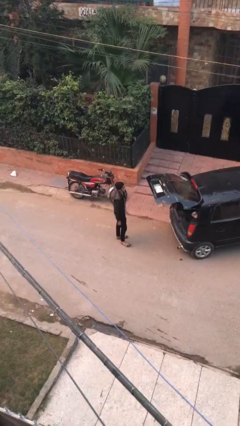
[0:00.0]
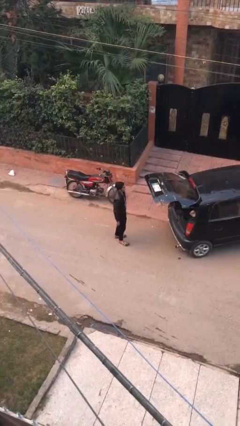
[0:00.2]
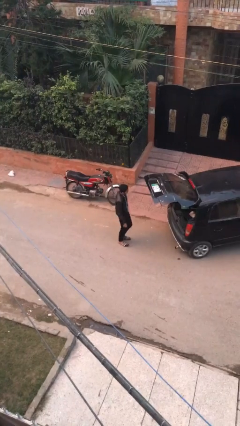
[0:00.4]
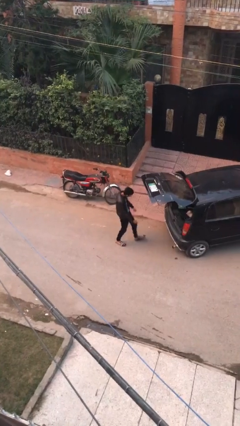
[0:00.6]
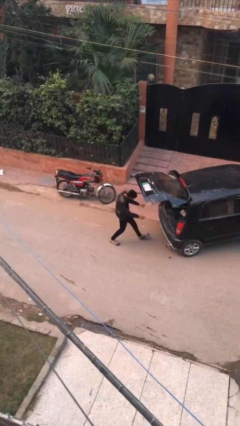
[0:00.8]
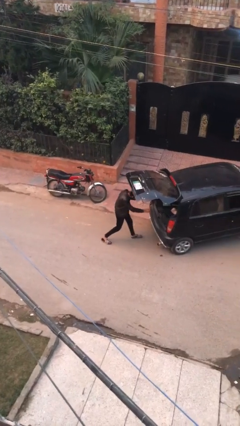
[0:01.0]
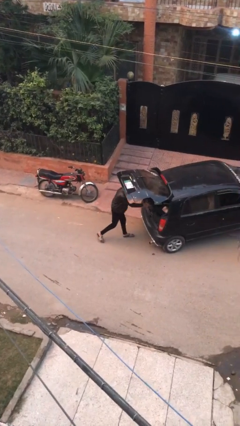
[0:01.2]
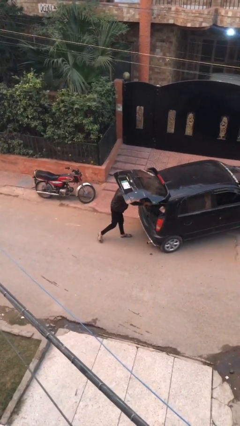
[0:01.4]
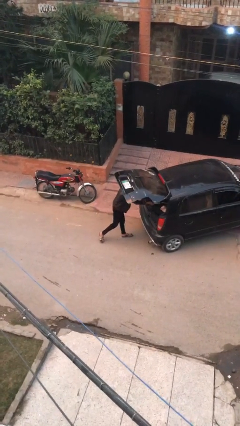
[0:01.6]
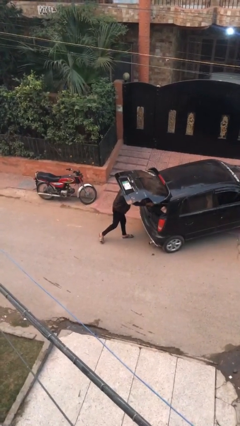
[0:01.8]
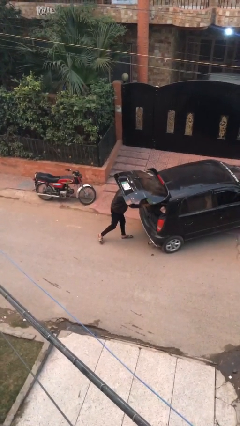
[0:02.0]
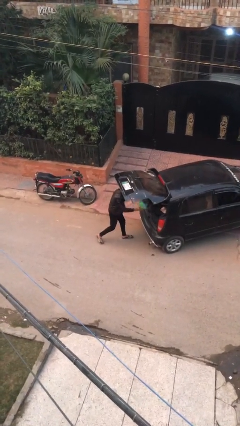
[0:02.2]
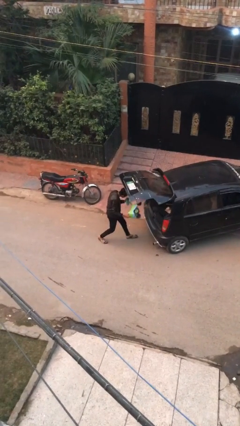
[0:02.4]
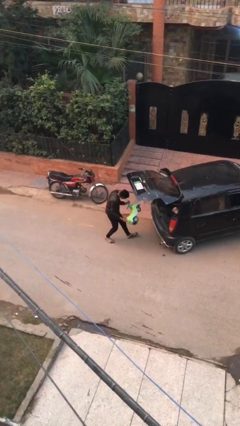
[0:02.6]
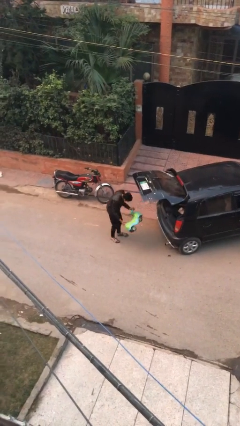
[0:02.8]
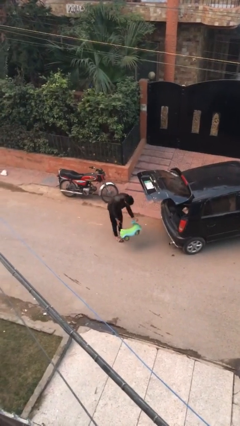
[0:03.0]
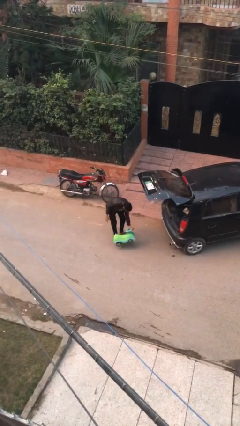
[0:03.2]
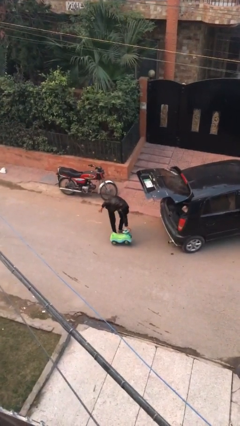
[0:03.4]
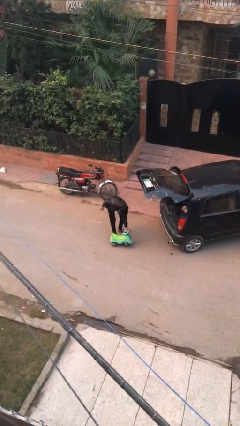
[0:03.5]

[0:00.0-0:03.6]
person unloads car

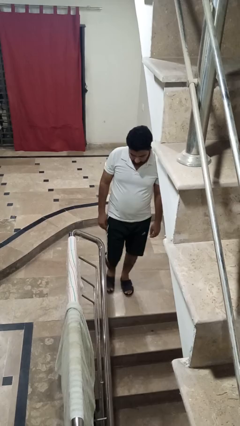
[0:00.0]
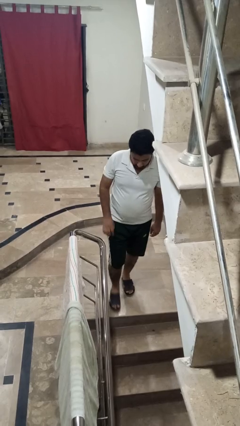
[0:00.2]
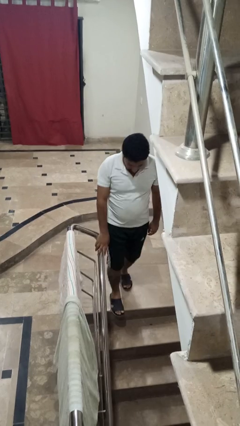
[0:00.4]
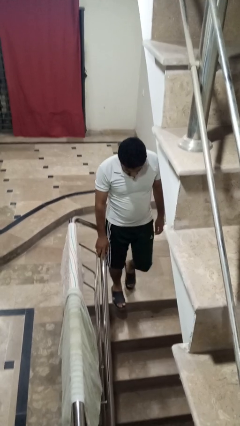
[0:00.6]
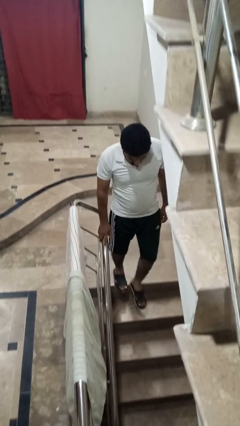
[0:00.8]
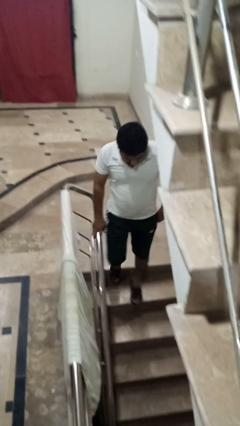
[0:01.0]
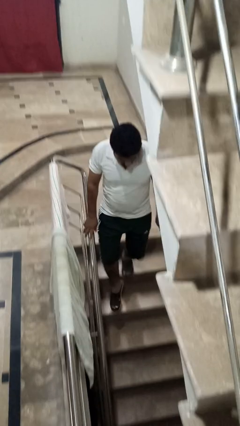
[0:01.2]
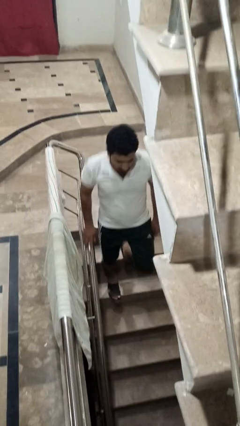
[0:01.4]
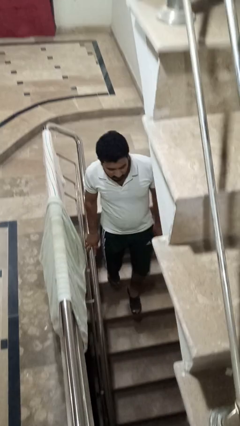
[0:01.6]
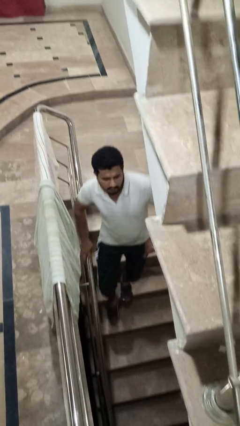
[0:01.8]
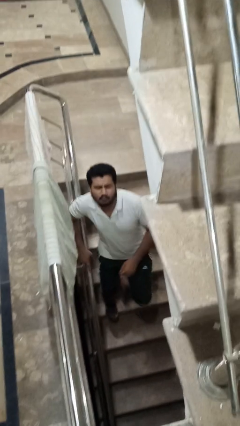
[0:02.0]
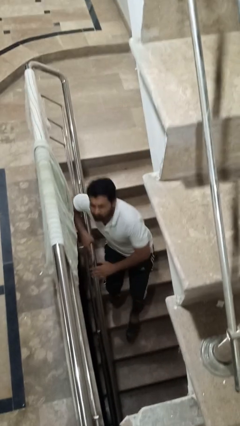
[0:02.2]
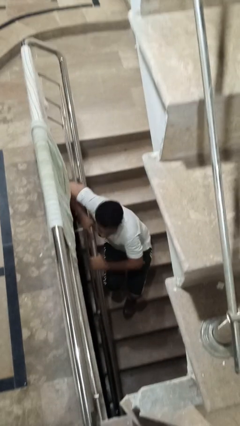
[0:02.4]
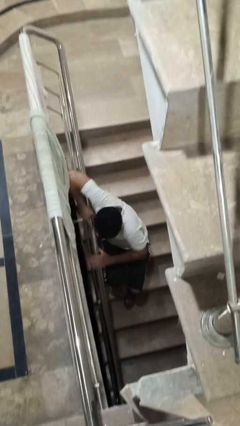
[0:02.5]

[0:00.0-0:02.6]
person climbs down stairs

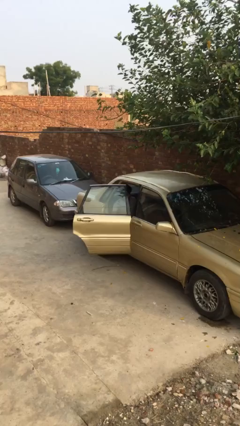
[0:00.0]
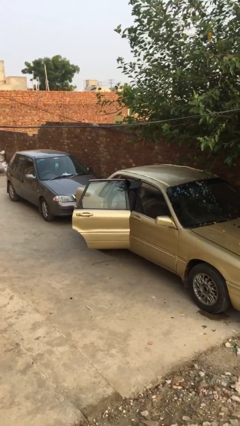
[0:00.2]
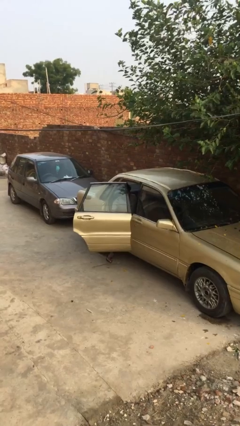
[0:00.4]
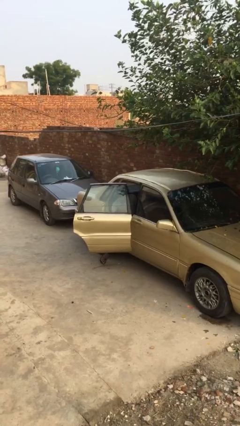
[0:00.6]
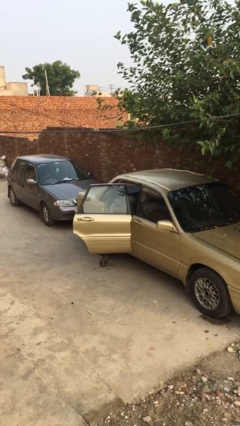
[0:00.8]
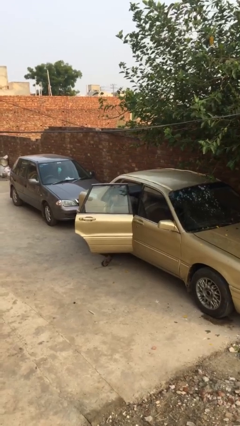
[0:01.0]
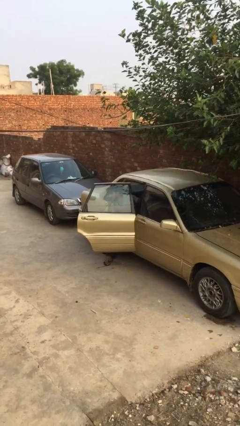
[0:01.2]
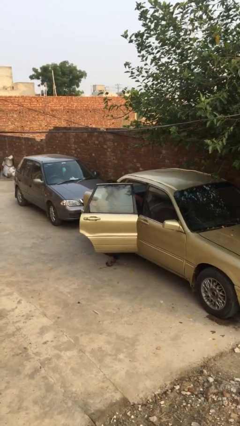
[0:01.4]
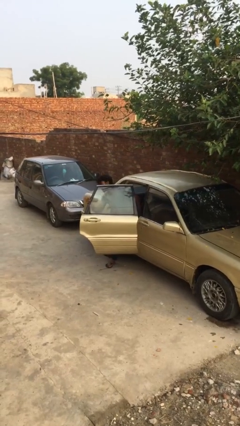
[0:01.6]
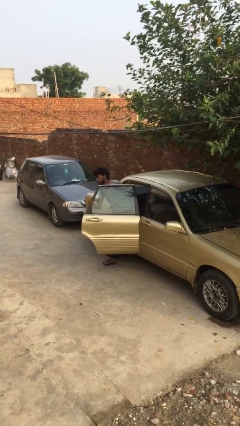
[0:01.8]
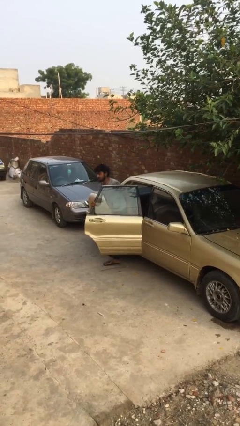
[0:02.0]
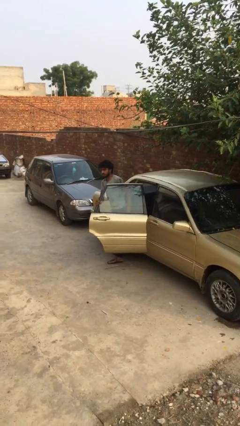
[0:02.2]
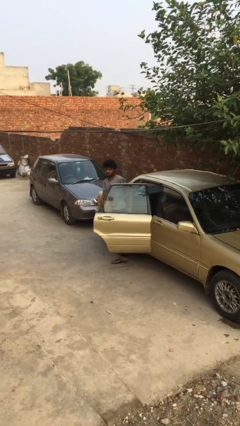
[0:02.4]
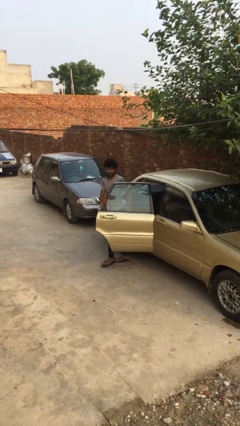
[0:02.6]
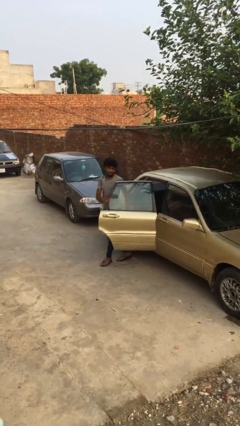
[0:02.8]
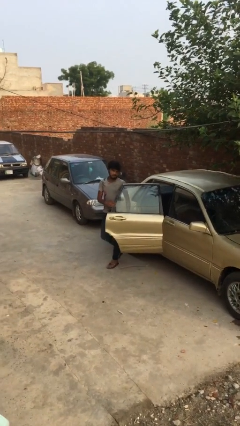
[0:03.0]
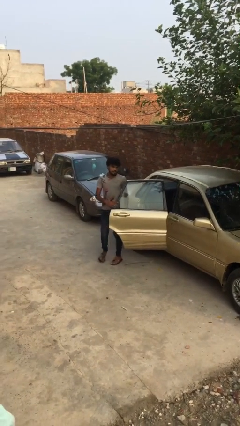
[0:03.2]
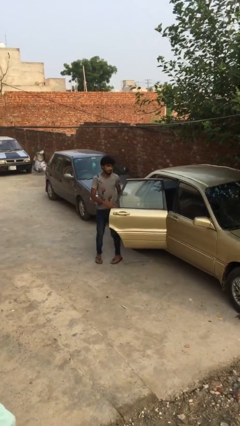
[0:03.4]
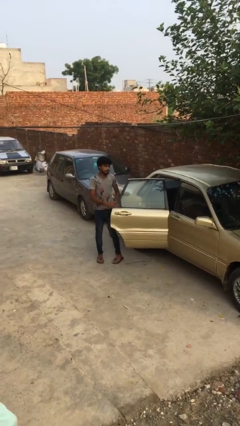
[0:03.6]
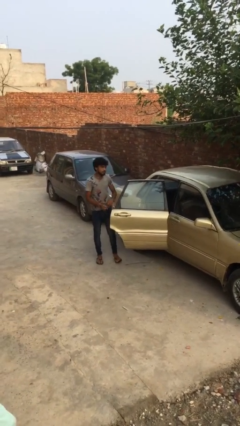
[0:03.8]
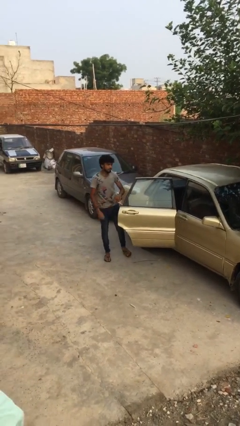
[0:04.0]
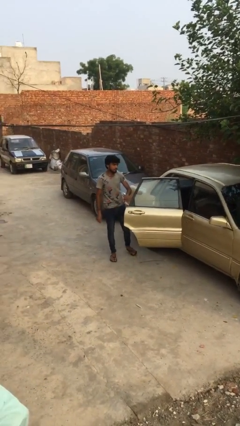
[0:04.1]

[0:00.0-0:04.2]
person exits car

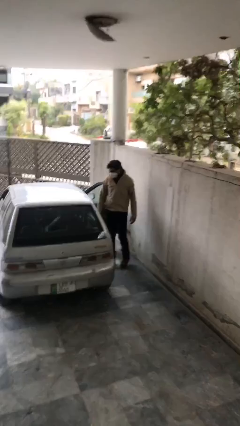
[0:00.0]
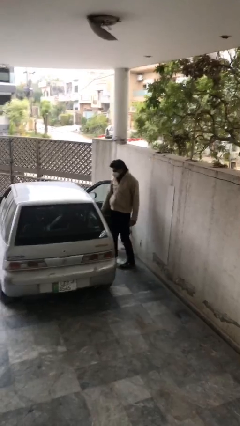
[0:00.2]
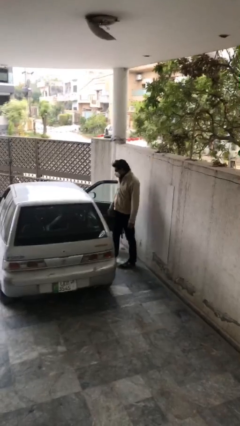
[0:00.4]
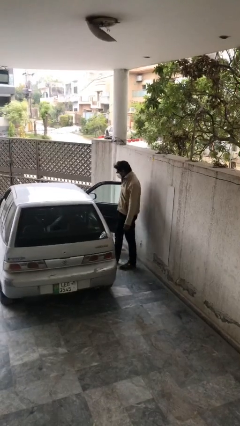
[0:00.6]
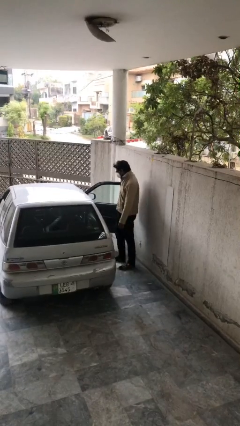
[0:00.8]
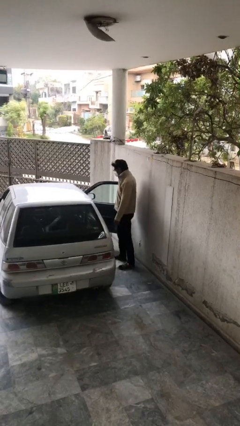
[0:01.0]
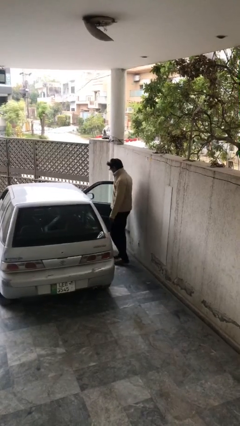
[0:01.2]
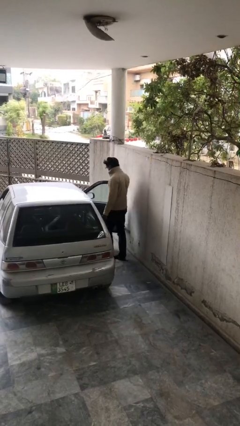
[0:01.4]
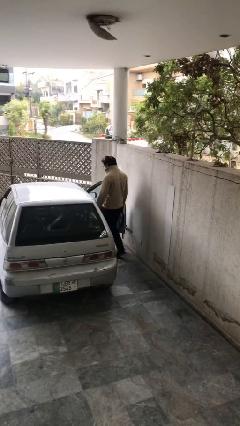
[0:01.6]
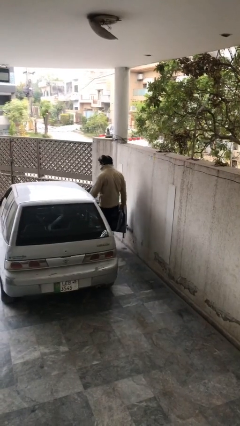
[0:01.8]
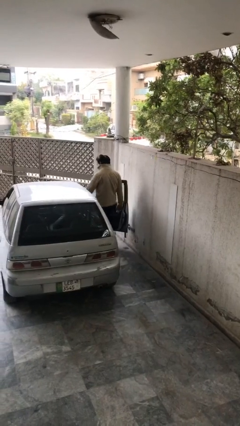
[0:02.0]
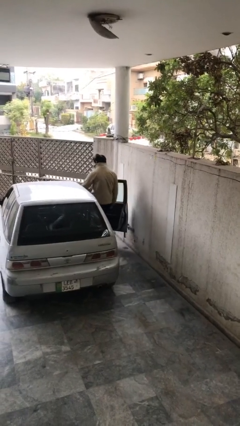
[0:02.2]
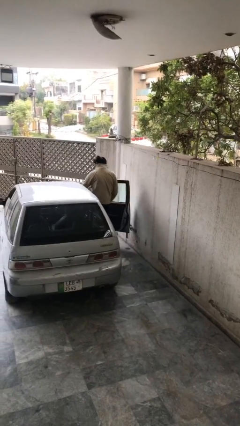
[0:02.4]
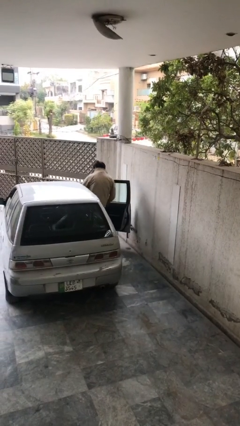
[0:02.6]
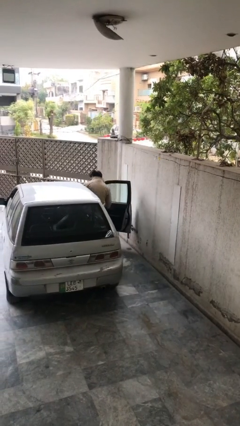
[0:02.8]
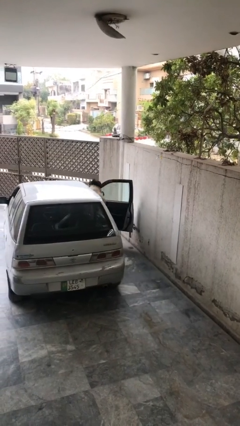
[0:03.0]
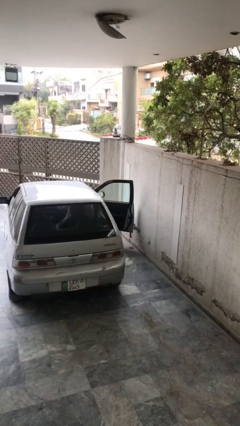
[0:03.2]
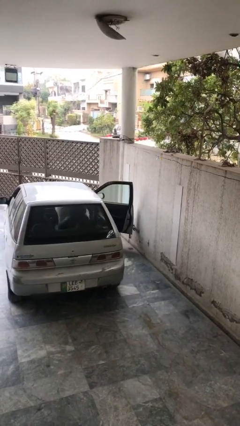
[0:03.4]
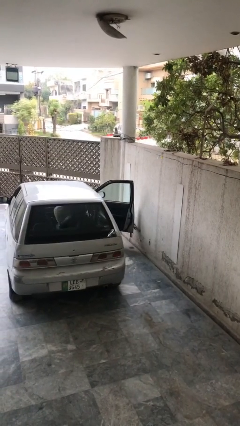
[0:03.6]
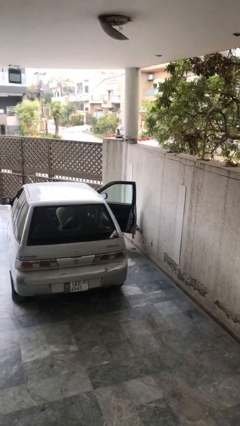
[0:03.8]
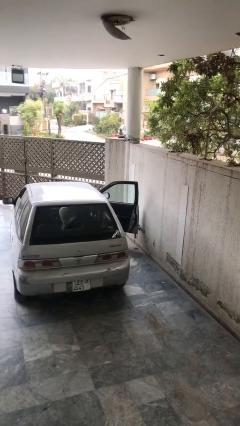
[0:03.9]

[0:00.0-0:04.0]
person enters car

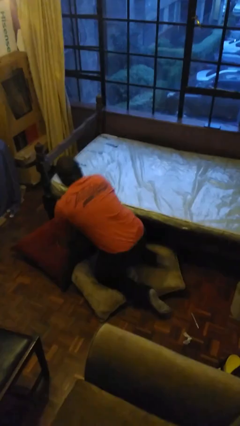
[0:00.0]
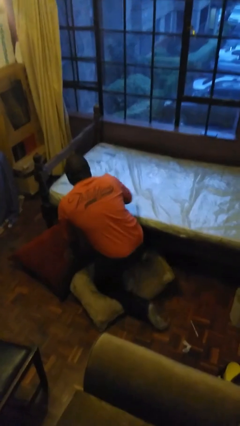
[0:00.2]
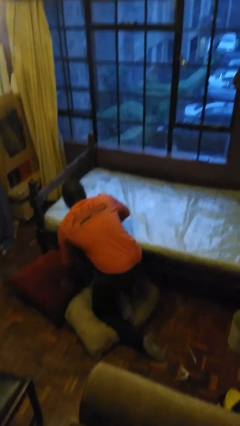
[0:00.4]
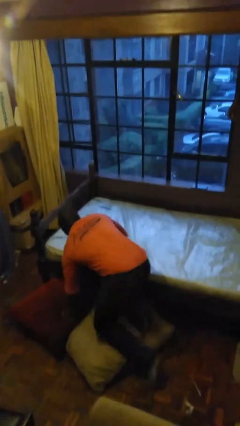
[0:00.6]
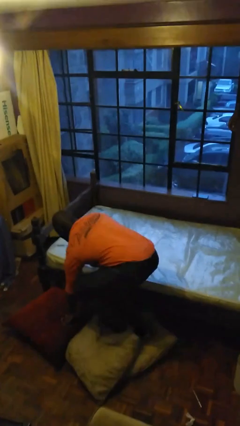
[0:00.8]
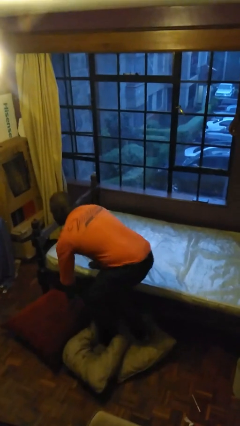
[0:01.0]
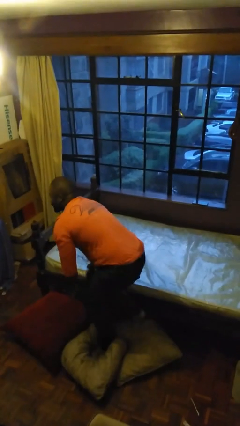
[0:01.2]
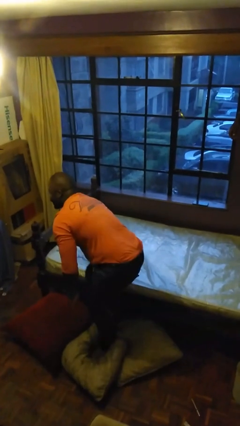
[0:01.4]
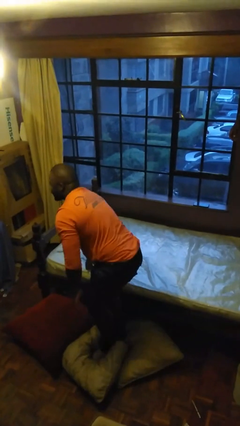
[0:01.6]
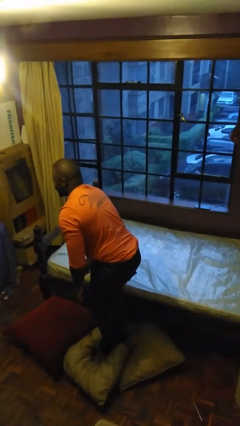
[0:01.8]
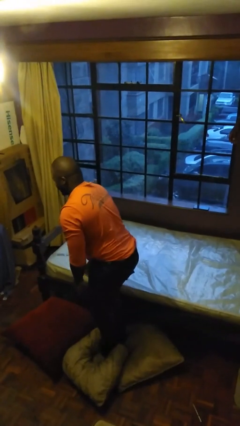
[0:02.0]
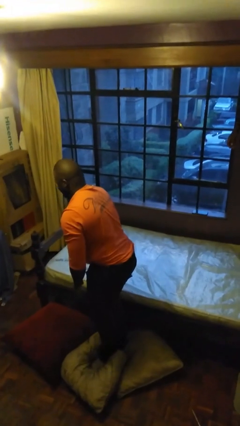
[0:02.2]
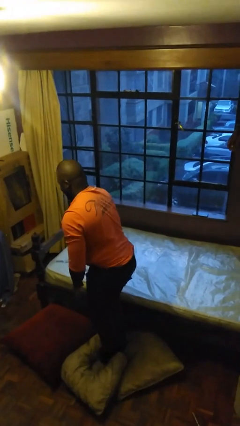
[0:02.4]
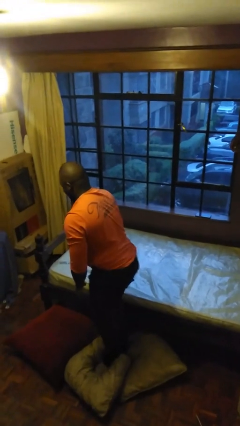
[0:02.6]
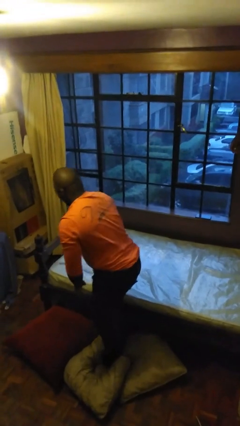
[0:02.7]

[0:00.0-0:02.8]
person stands up from floor

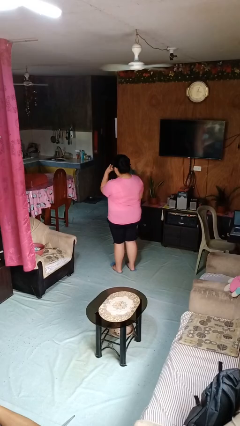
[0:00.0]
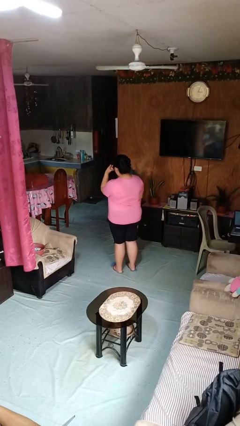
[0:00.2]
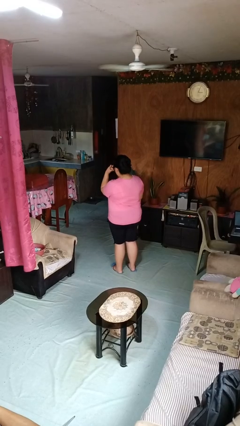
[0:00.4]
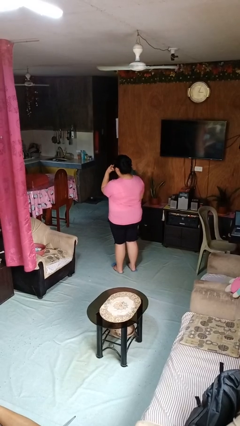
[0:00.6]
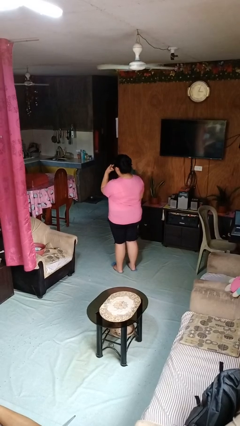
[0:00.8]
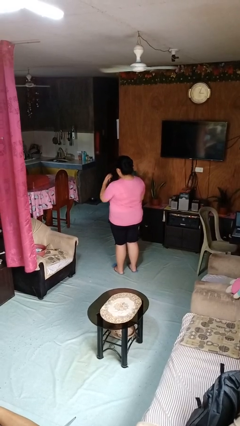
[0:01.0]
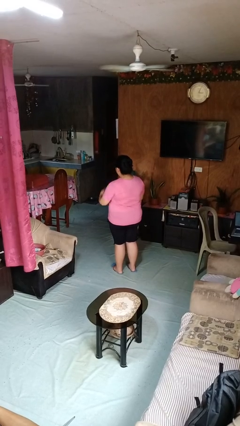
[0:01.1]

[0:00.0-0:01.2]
person gestures watch closely
